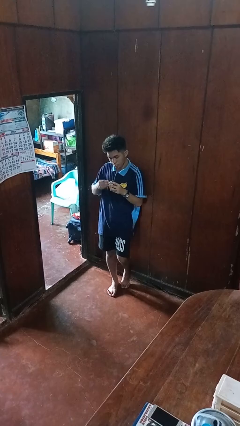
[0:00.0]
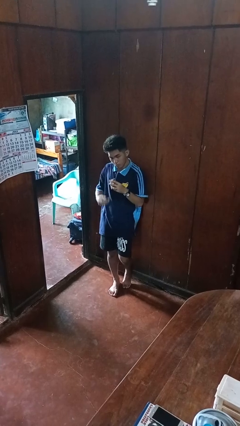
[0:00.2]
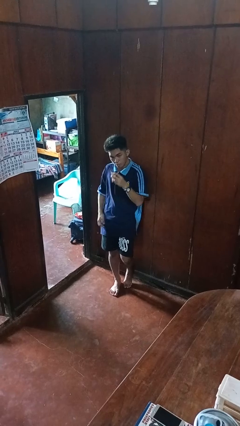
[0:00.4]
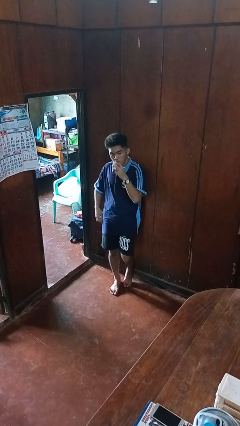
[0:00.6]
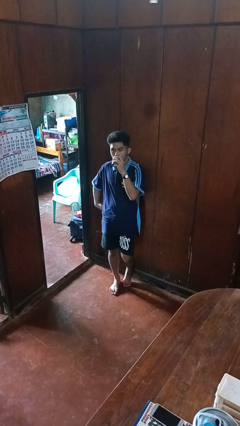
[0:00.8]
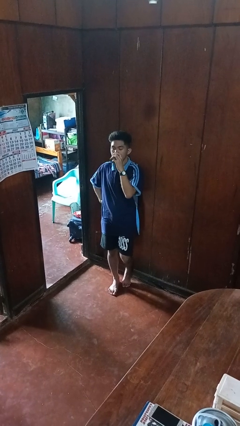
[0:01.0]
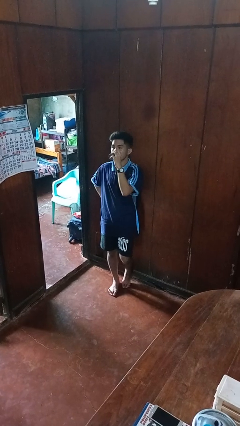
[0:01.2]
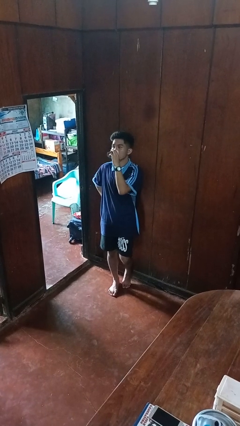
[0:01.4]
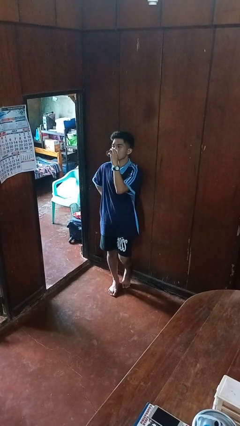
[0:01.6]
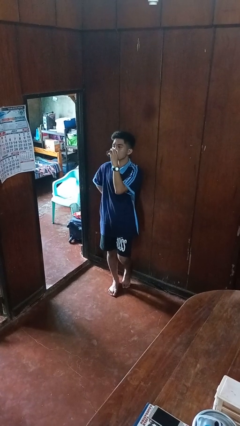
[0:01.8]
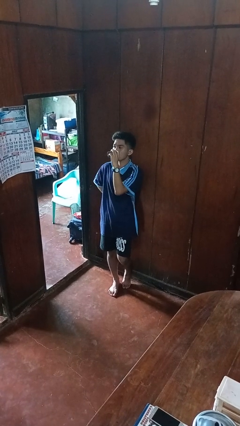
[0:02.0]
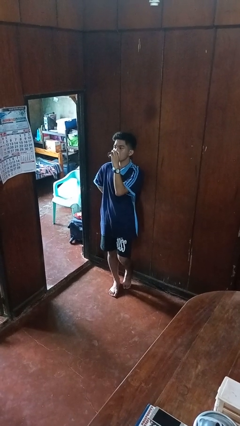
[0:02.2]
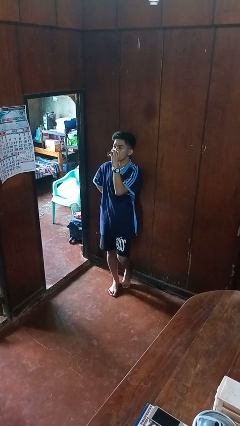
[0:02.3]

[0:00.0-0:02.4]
person drinks from beverage can

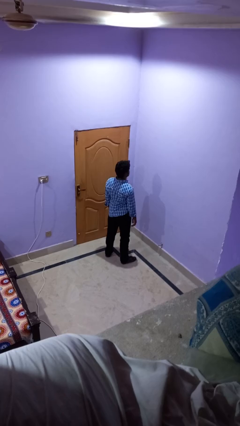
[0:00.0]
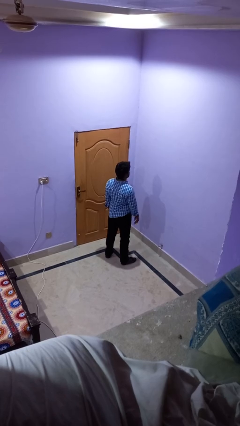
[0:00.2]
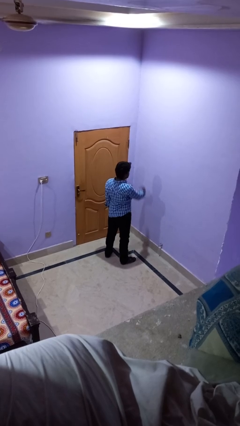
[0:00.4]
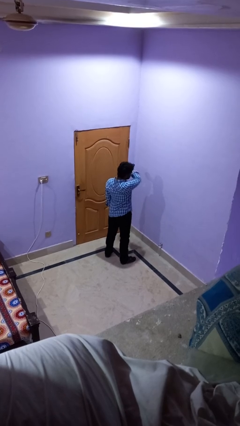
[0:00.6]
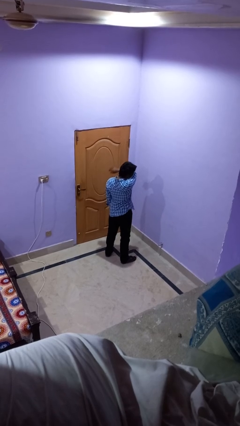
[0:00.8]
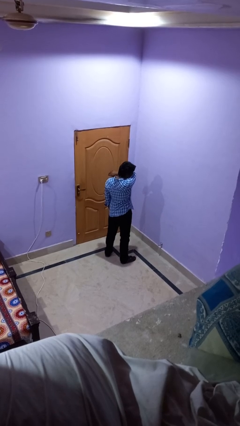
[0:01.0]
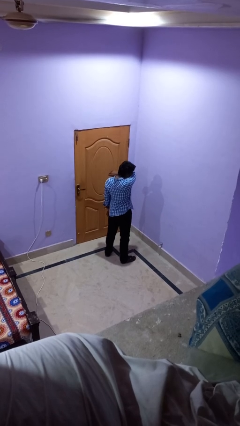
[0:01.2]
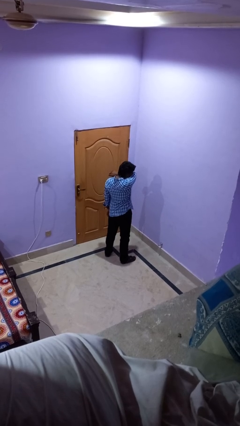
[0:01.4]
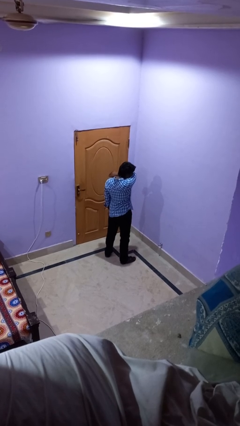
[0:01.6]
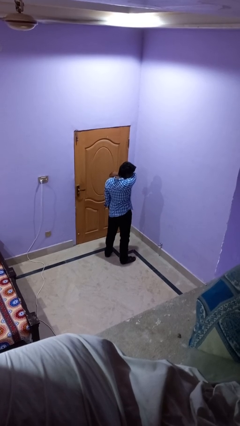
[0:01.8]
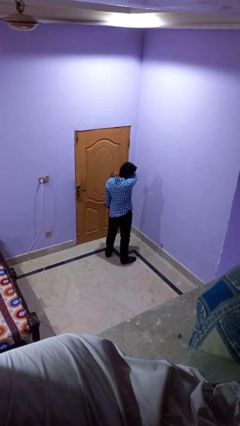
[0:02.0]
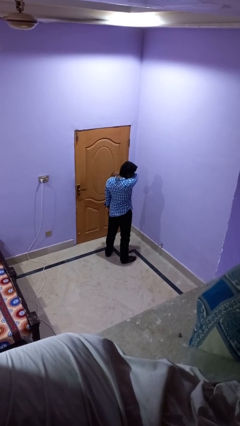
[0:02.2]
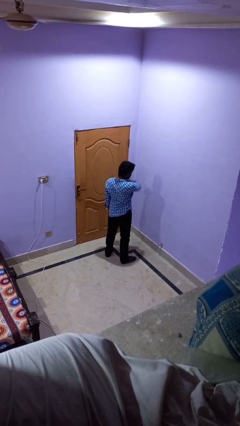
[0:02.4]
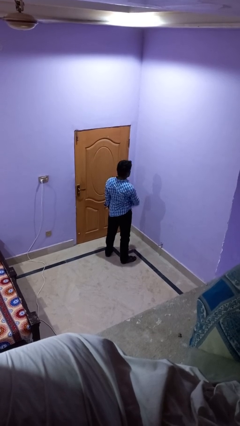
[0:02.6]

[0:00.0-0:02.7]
person sneezes into arm

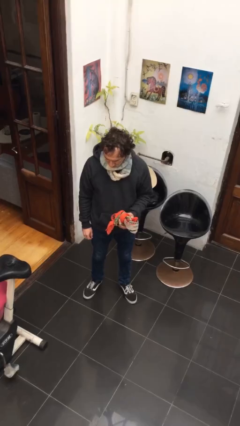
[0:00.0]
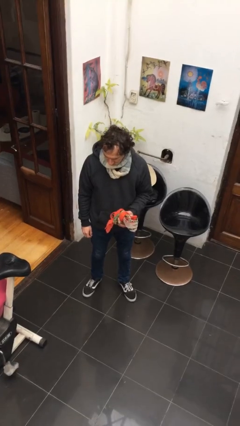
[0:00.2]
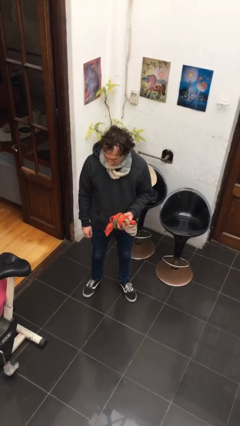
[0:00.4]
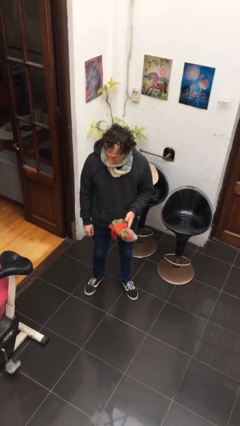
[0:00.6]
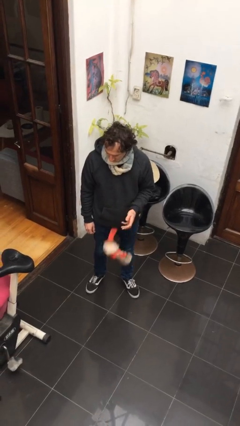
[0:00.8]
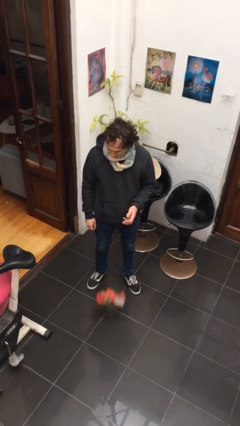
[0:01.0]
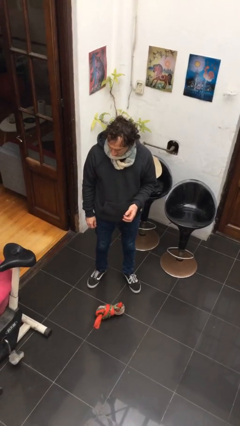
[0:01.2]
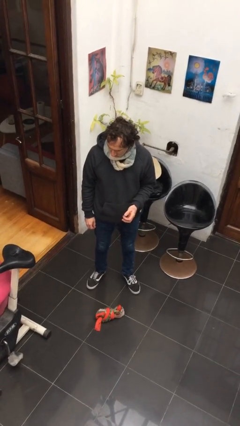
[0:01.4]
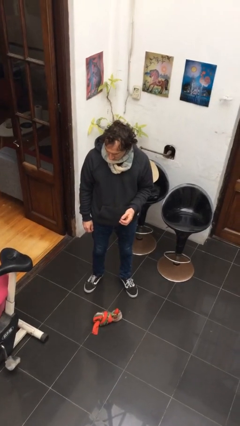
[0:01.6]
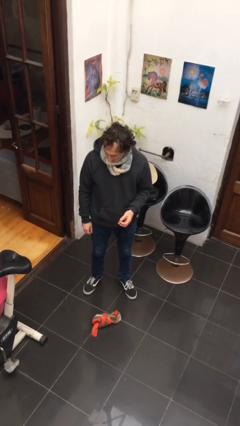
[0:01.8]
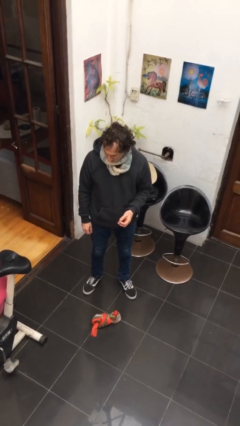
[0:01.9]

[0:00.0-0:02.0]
person drops object

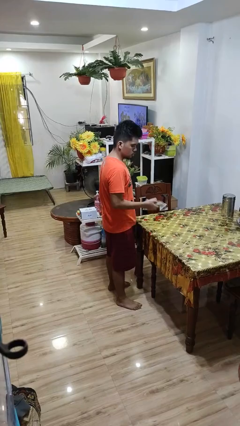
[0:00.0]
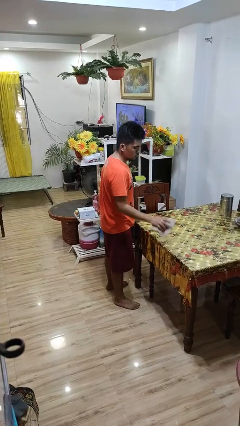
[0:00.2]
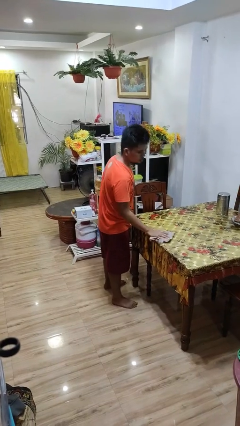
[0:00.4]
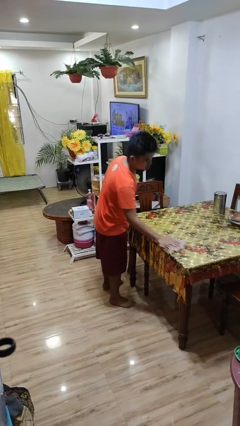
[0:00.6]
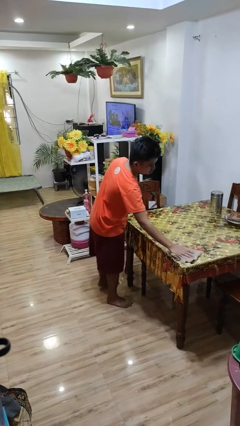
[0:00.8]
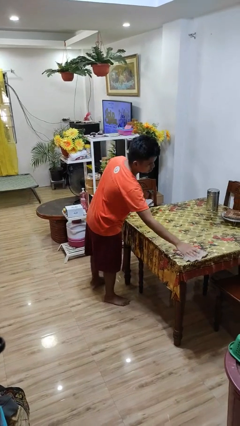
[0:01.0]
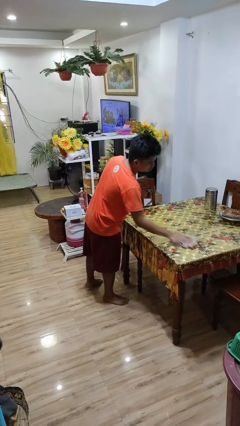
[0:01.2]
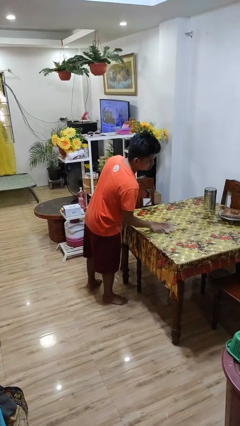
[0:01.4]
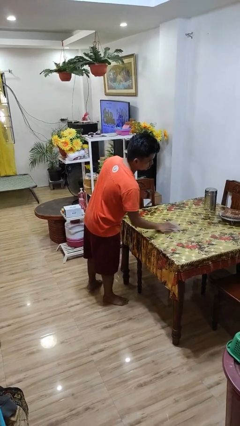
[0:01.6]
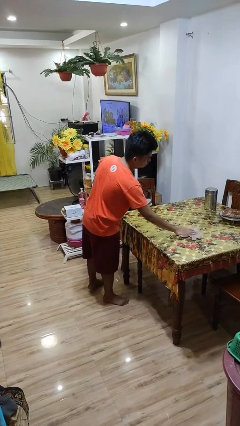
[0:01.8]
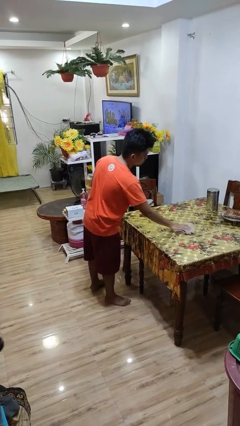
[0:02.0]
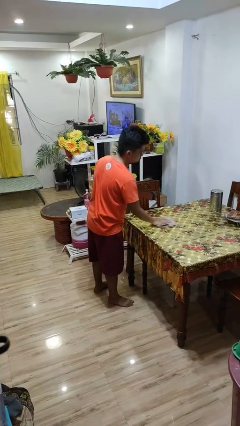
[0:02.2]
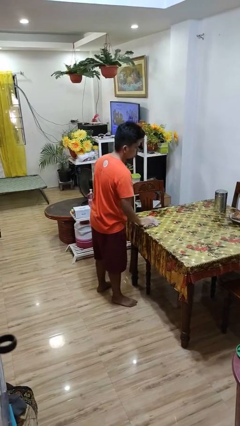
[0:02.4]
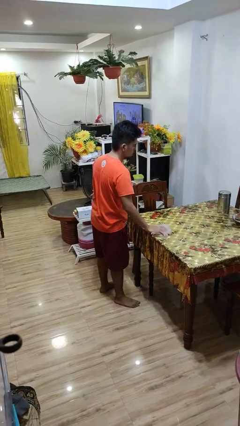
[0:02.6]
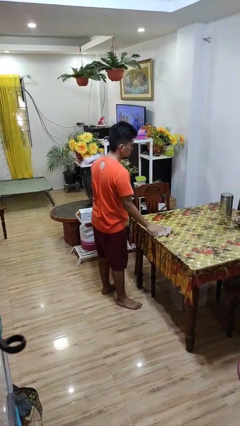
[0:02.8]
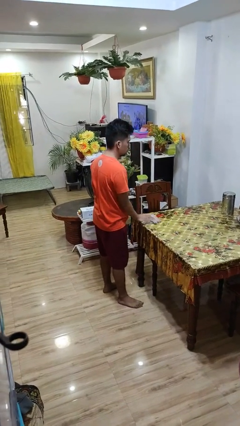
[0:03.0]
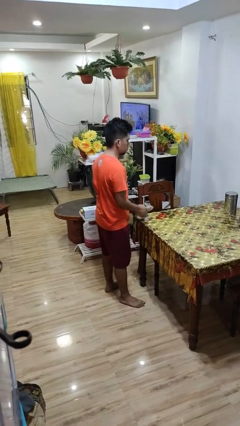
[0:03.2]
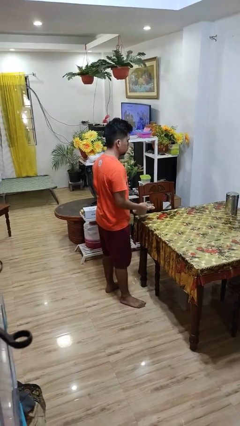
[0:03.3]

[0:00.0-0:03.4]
person cleans table with rag

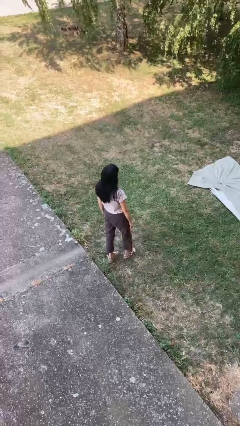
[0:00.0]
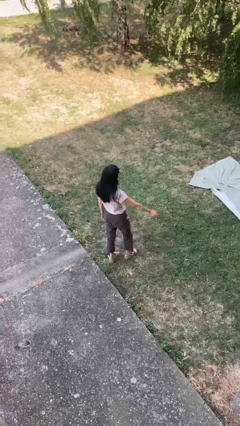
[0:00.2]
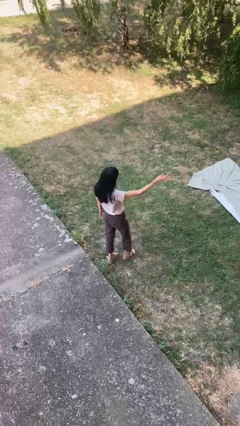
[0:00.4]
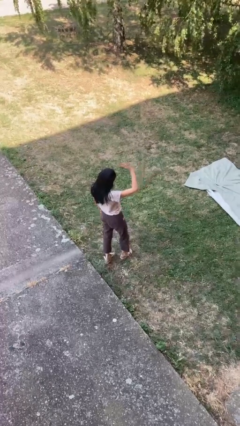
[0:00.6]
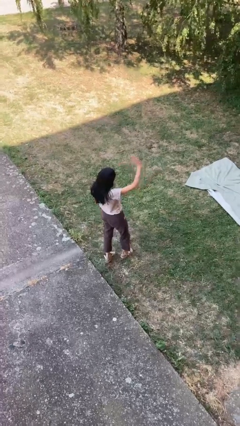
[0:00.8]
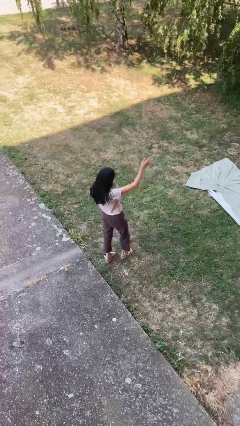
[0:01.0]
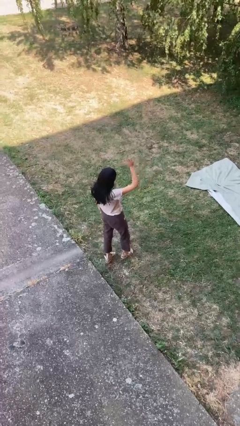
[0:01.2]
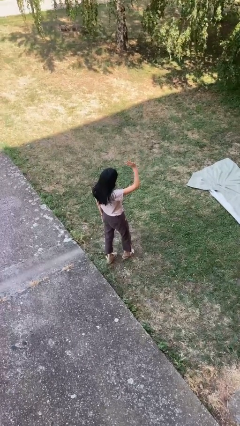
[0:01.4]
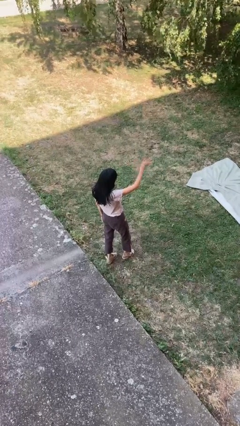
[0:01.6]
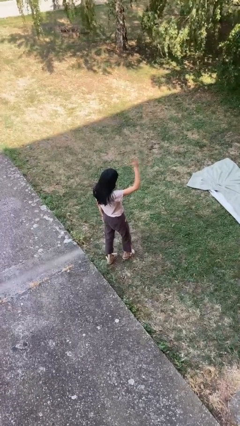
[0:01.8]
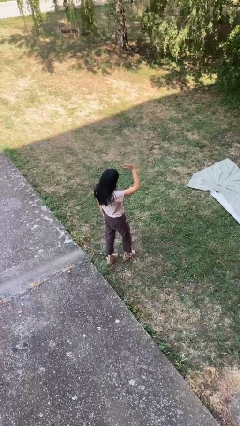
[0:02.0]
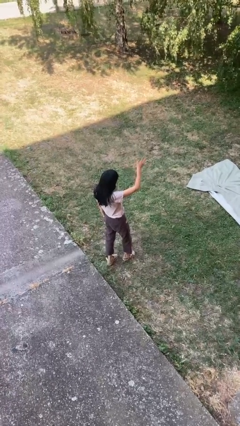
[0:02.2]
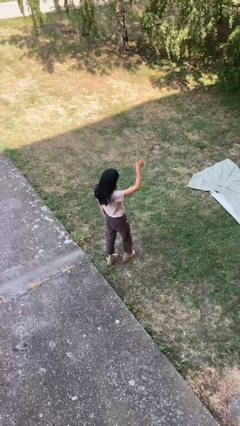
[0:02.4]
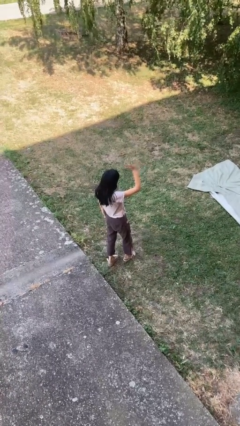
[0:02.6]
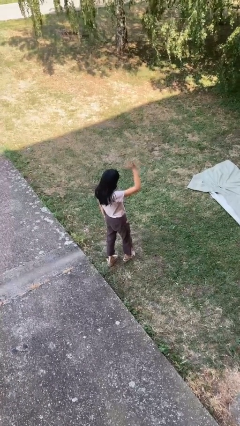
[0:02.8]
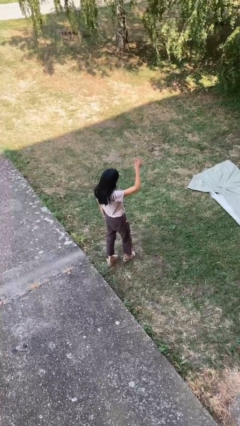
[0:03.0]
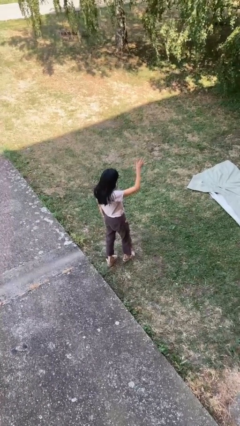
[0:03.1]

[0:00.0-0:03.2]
person waves at person

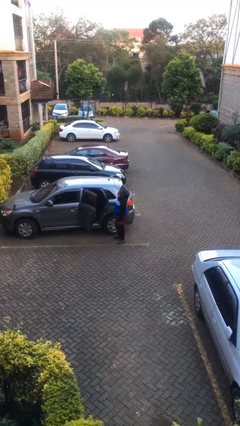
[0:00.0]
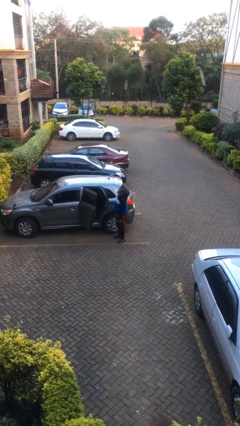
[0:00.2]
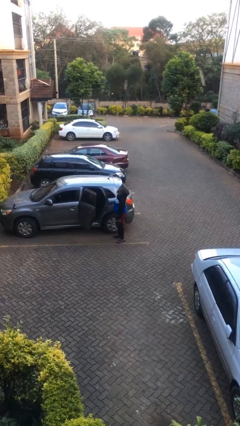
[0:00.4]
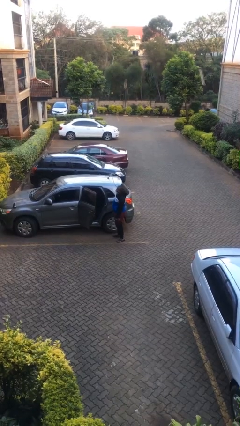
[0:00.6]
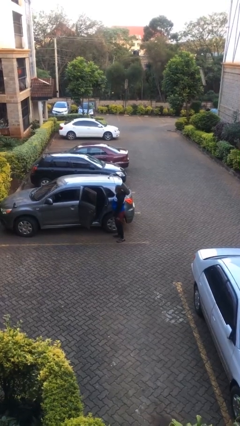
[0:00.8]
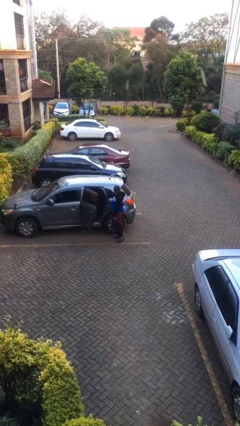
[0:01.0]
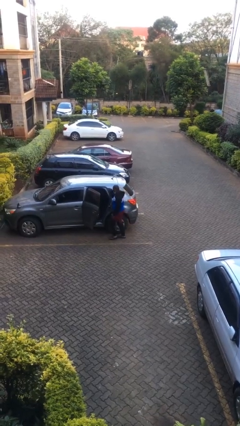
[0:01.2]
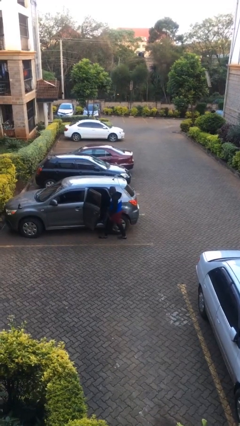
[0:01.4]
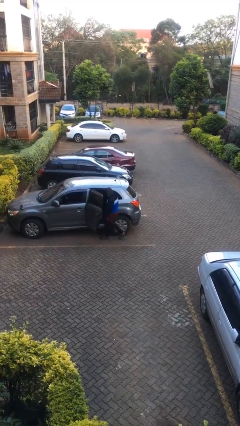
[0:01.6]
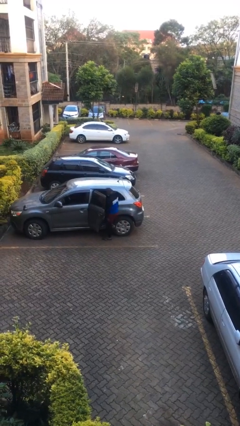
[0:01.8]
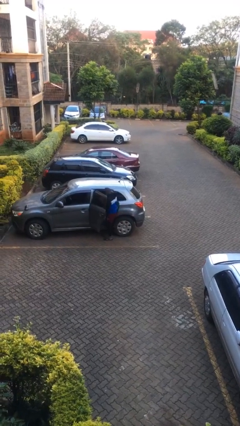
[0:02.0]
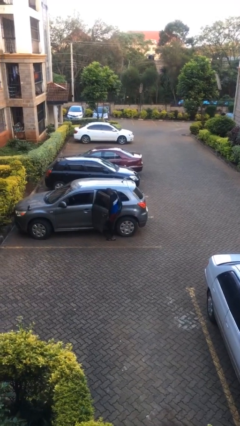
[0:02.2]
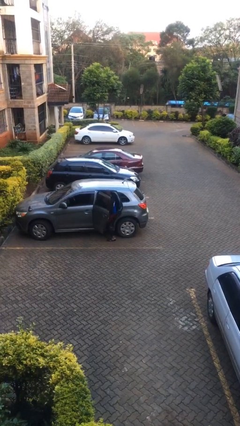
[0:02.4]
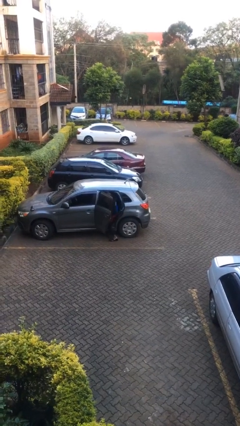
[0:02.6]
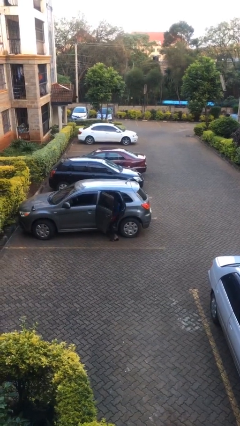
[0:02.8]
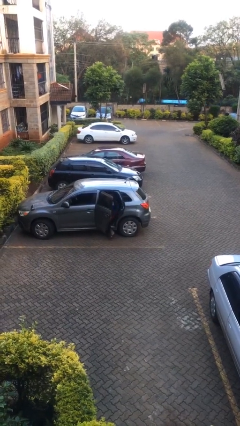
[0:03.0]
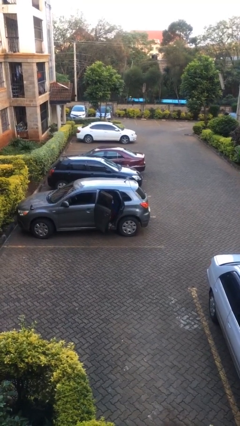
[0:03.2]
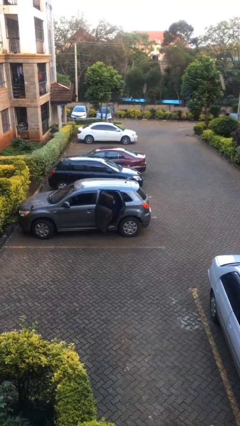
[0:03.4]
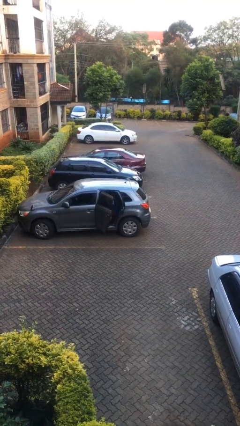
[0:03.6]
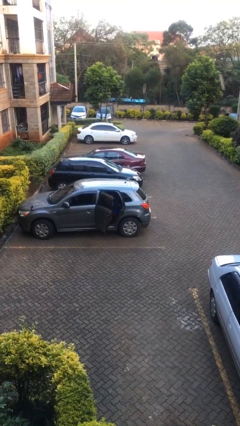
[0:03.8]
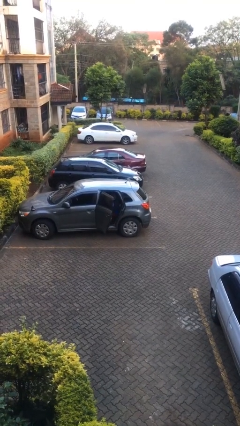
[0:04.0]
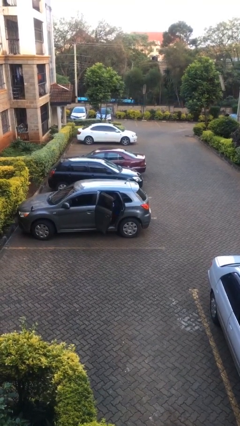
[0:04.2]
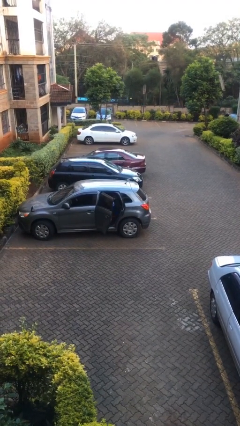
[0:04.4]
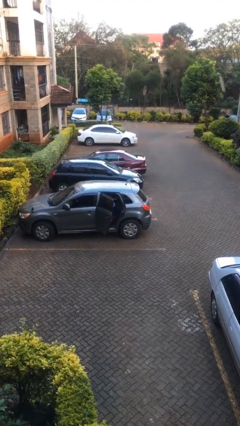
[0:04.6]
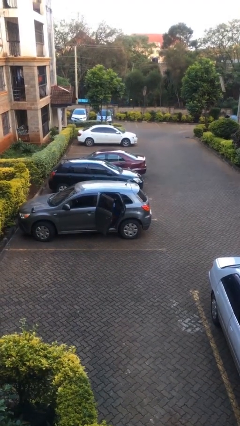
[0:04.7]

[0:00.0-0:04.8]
person enters car
